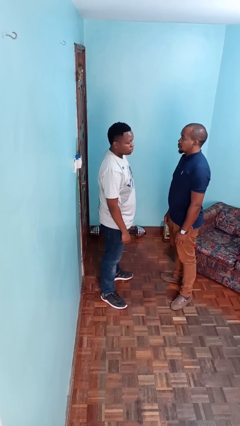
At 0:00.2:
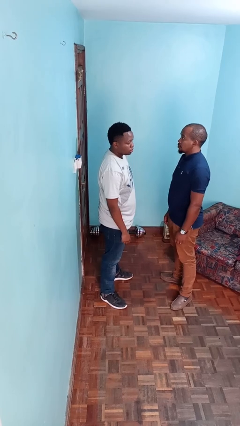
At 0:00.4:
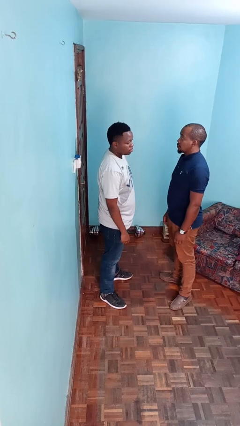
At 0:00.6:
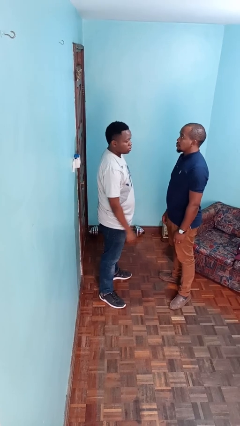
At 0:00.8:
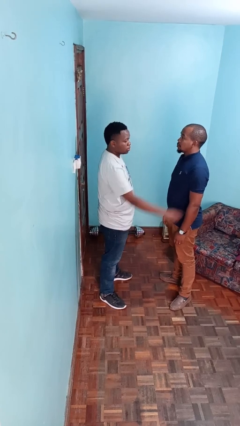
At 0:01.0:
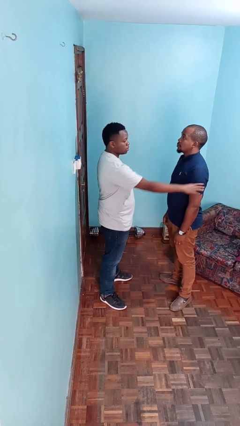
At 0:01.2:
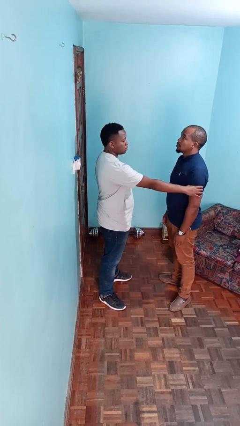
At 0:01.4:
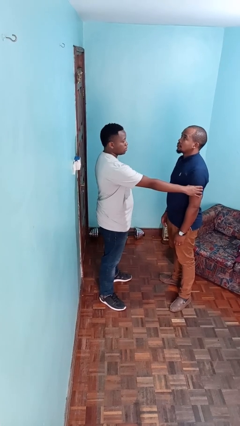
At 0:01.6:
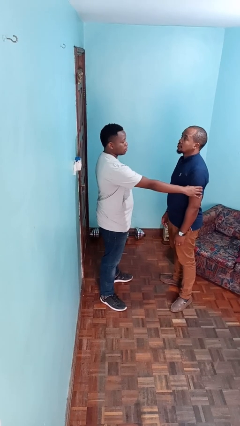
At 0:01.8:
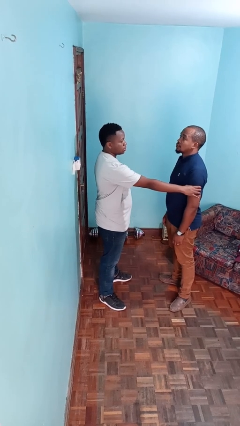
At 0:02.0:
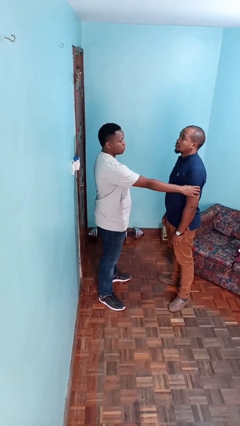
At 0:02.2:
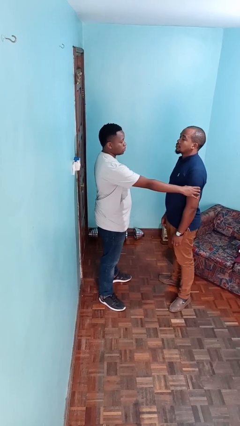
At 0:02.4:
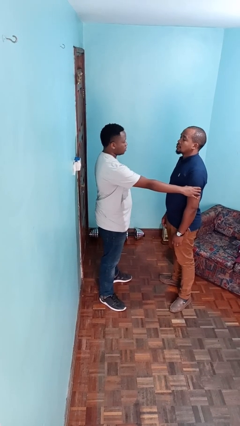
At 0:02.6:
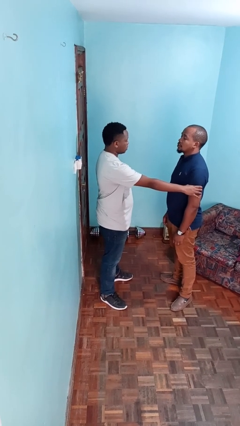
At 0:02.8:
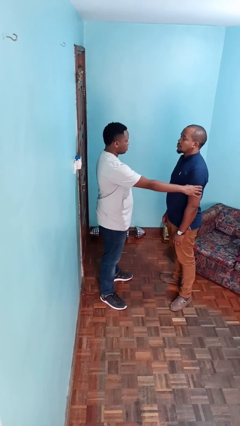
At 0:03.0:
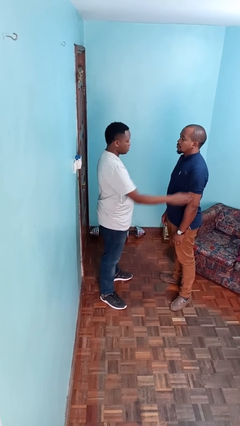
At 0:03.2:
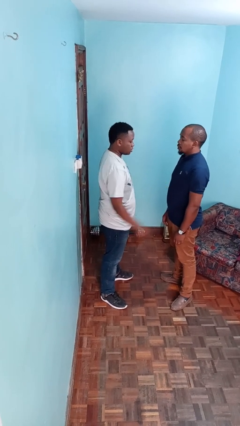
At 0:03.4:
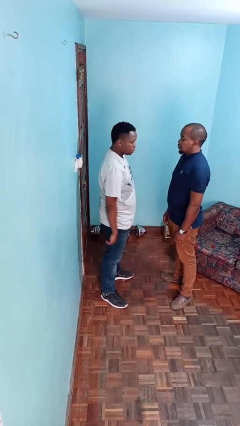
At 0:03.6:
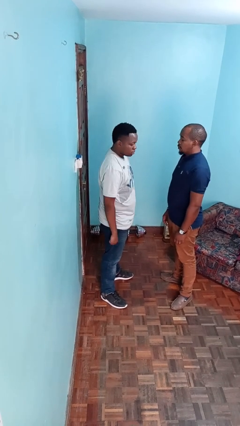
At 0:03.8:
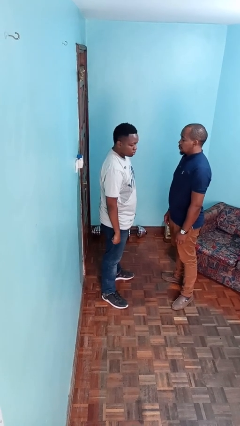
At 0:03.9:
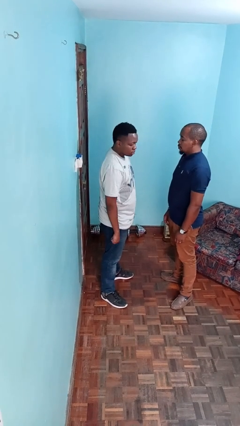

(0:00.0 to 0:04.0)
person grabs person by bicep

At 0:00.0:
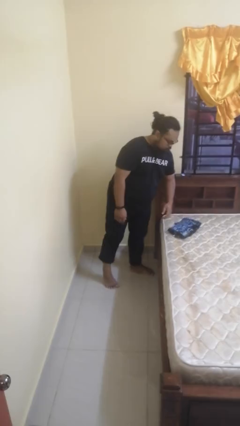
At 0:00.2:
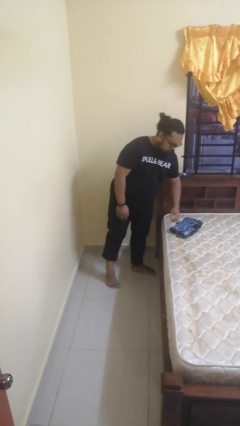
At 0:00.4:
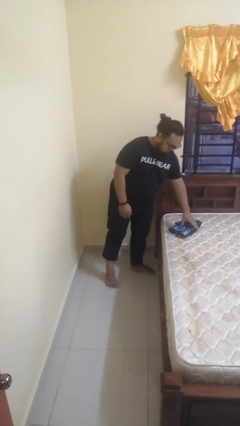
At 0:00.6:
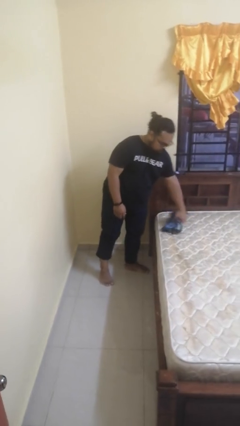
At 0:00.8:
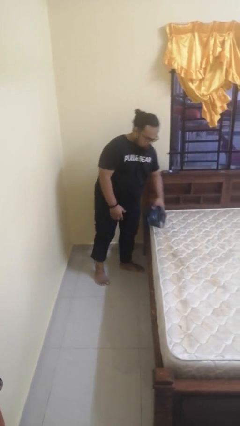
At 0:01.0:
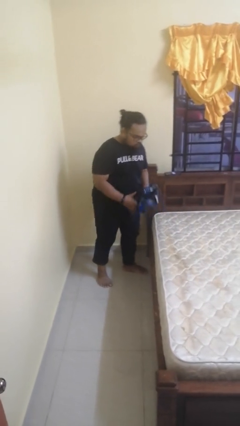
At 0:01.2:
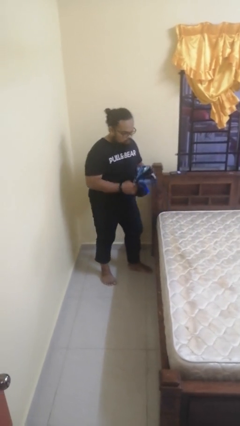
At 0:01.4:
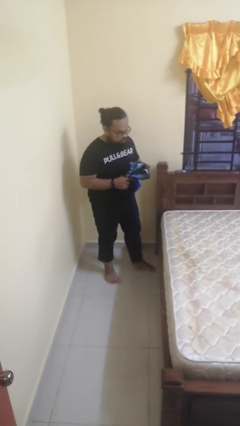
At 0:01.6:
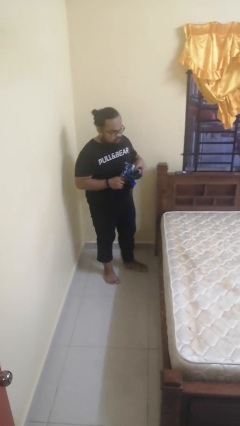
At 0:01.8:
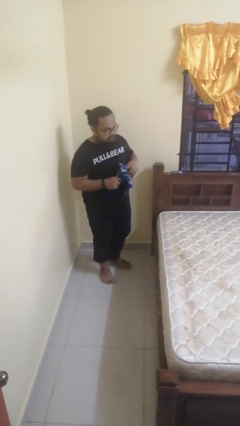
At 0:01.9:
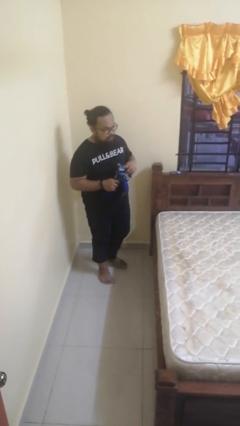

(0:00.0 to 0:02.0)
person picks up object from bed

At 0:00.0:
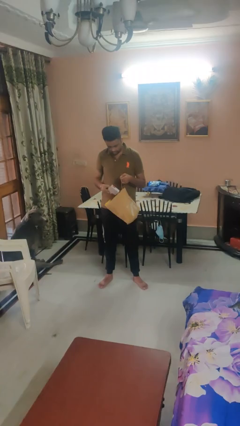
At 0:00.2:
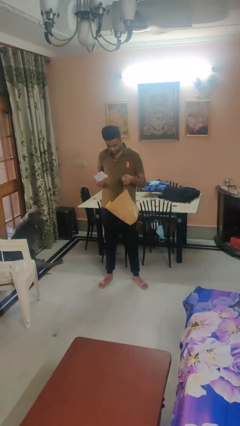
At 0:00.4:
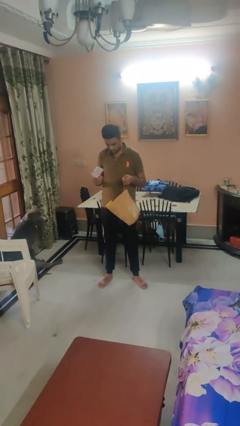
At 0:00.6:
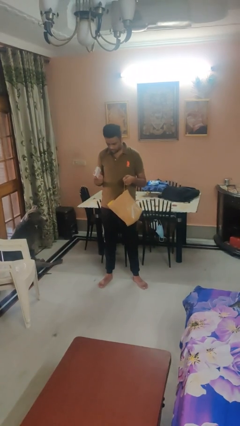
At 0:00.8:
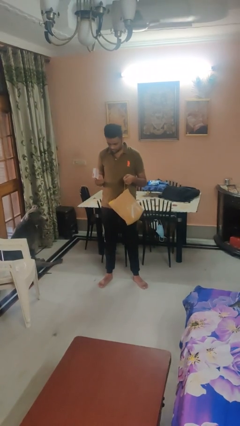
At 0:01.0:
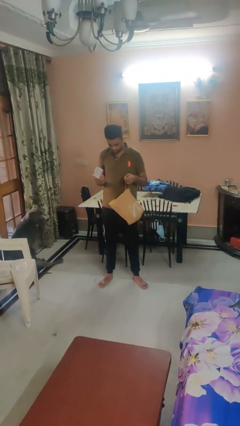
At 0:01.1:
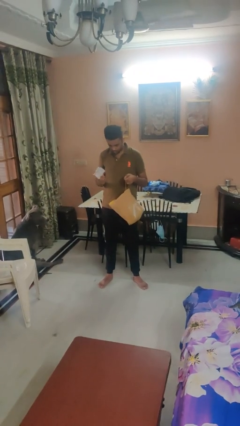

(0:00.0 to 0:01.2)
person takes object from bag

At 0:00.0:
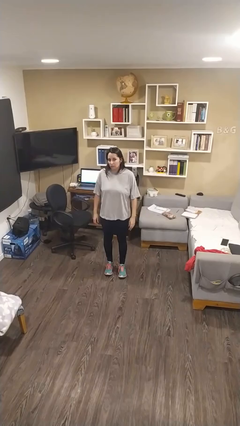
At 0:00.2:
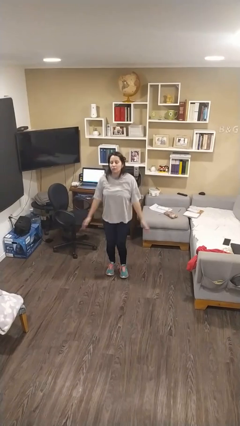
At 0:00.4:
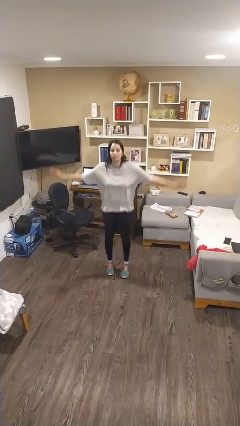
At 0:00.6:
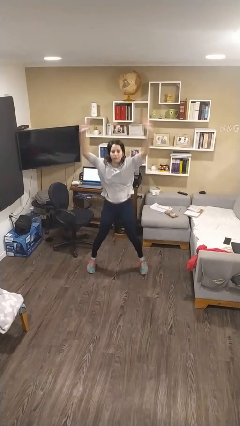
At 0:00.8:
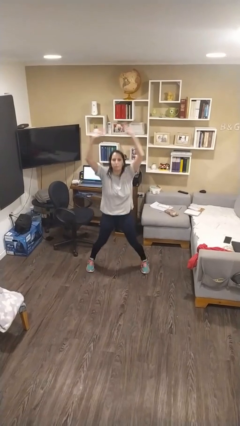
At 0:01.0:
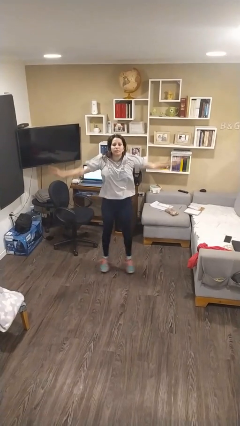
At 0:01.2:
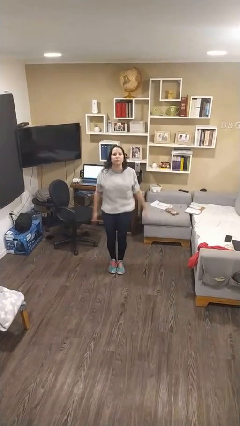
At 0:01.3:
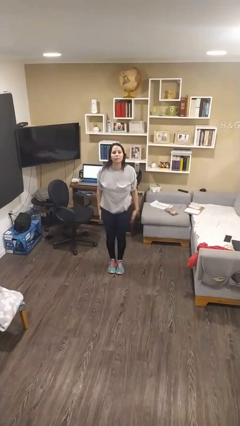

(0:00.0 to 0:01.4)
person exercises with jumping jacks

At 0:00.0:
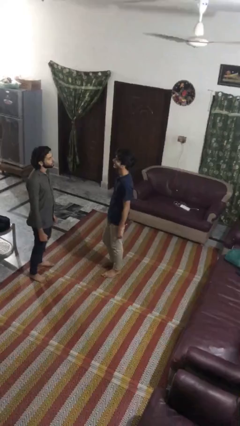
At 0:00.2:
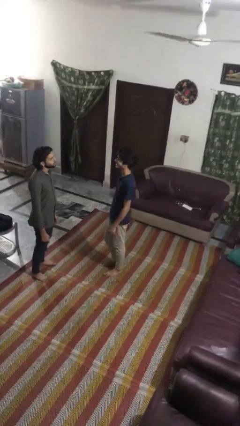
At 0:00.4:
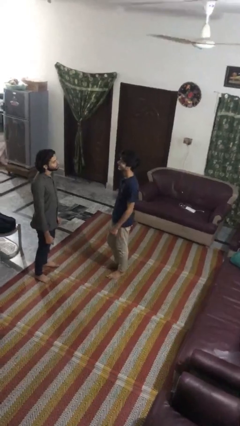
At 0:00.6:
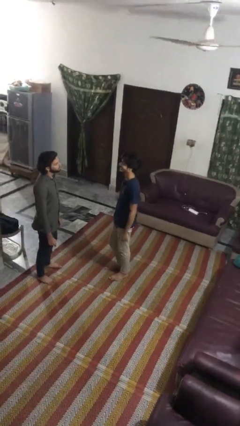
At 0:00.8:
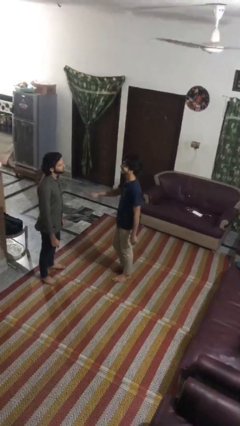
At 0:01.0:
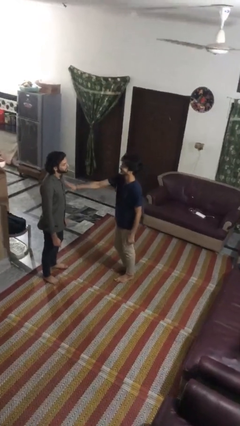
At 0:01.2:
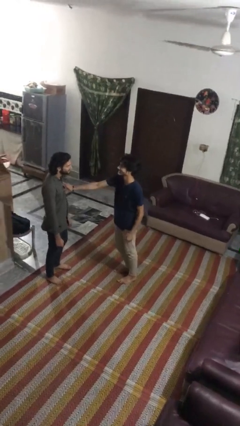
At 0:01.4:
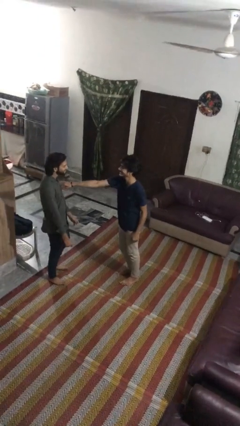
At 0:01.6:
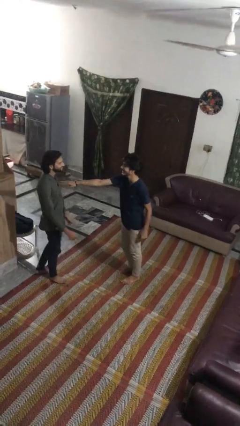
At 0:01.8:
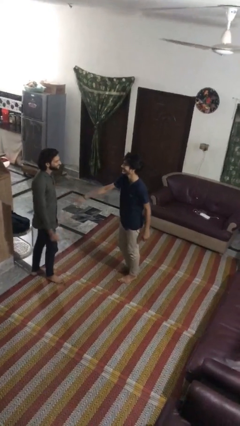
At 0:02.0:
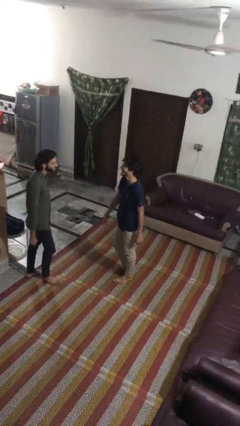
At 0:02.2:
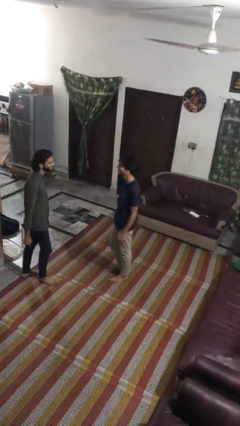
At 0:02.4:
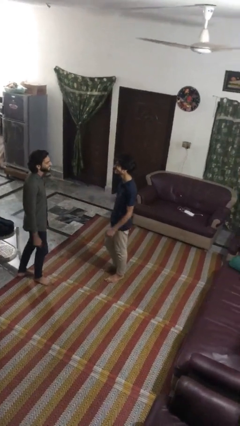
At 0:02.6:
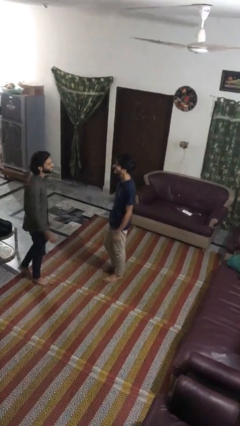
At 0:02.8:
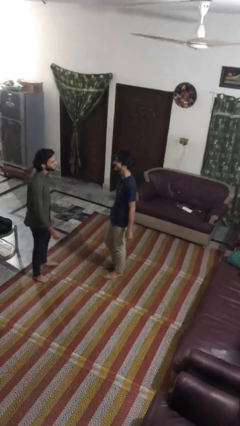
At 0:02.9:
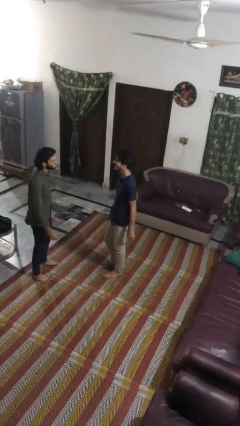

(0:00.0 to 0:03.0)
person shoves person

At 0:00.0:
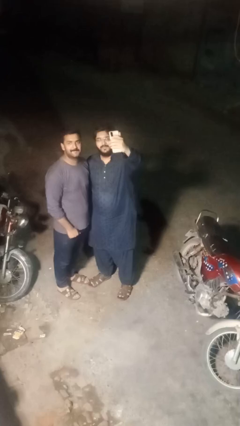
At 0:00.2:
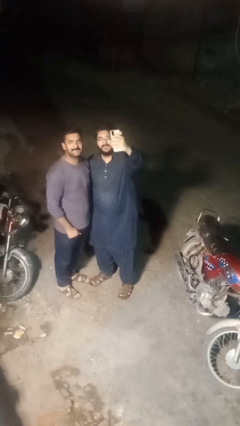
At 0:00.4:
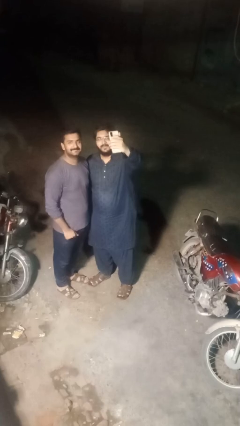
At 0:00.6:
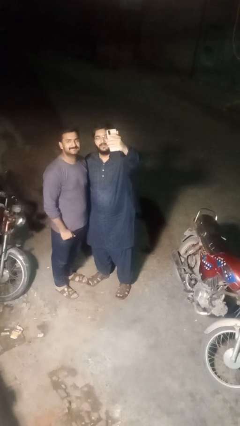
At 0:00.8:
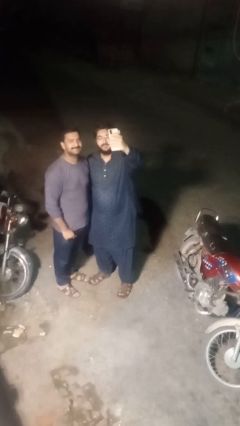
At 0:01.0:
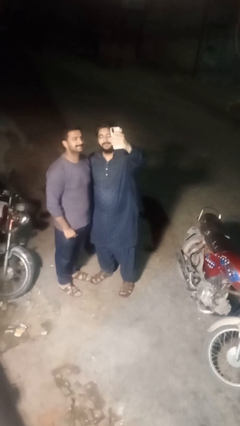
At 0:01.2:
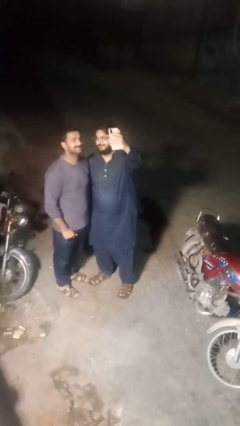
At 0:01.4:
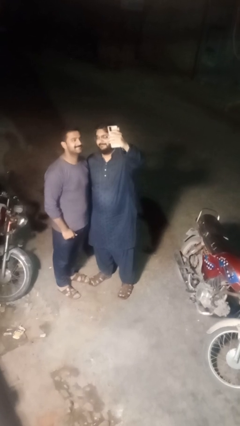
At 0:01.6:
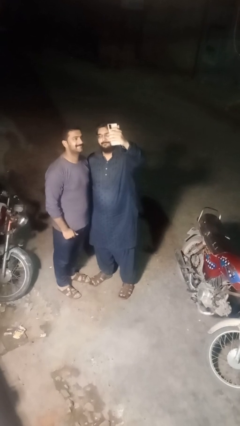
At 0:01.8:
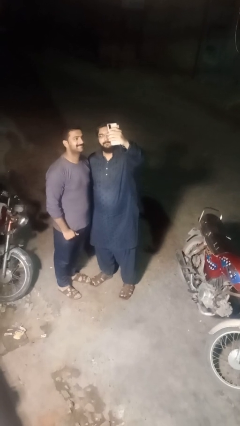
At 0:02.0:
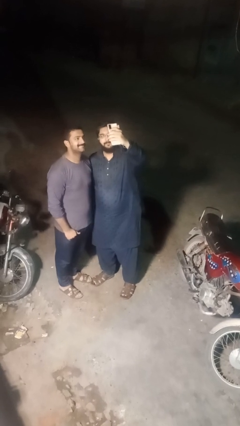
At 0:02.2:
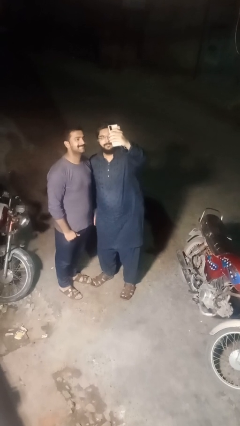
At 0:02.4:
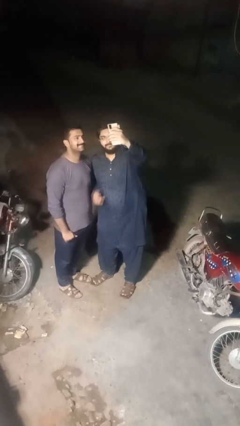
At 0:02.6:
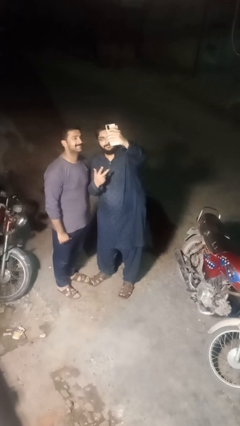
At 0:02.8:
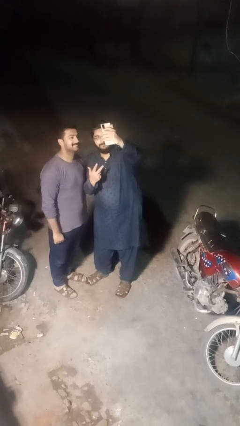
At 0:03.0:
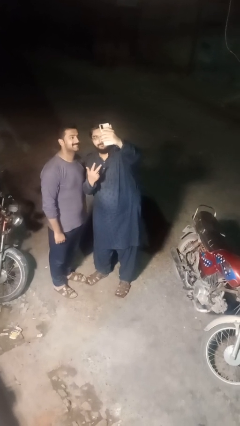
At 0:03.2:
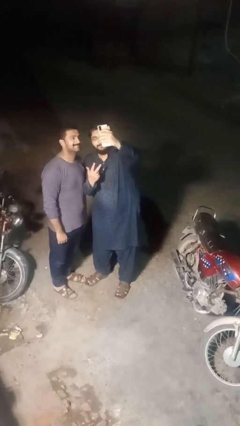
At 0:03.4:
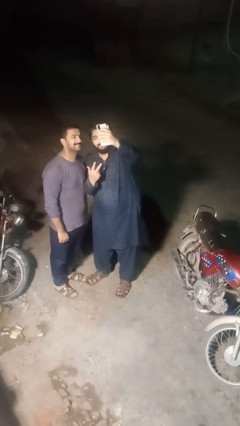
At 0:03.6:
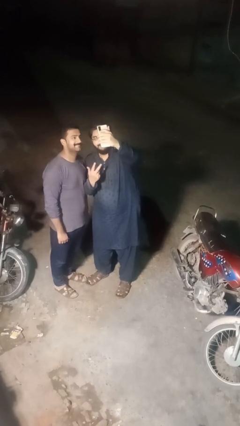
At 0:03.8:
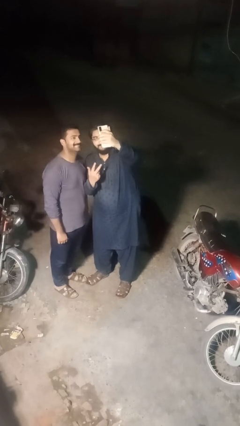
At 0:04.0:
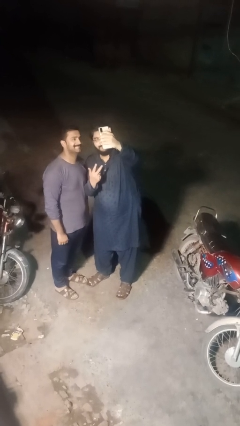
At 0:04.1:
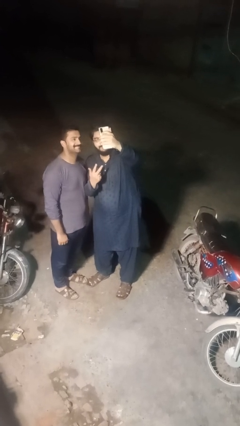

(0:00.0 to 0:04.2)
person takes selfie with person

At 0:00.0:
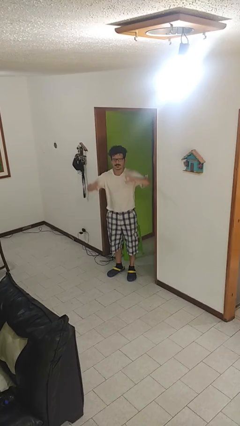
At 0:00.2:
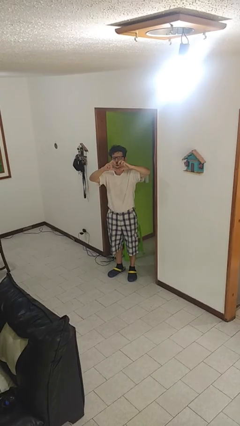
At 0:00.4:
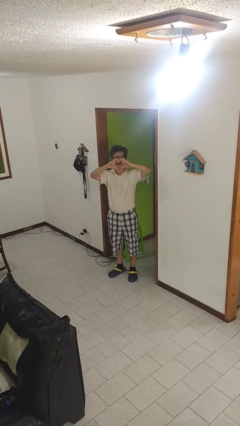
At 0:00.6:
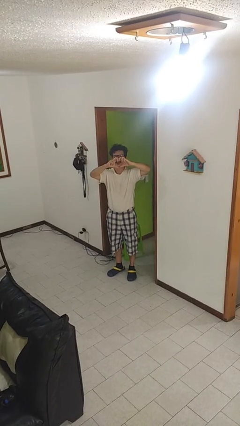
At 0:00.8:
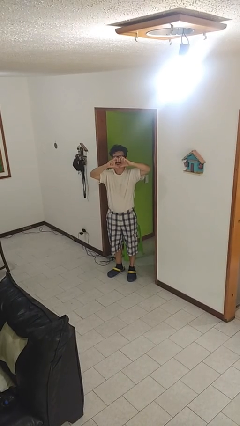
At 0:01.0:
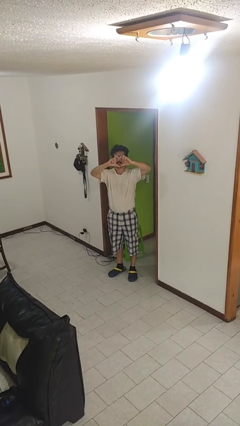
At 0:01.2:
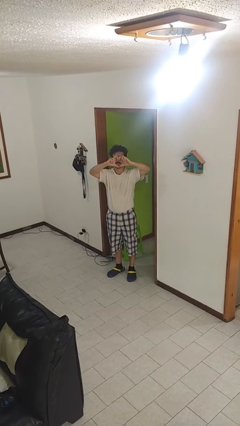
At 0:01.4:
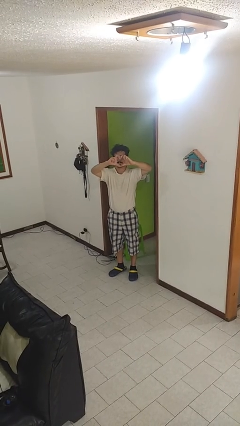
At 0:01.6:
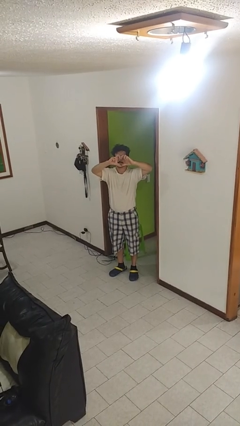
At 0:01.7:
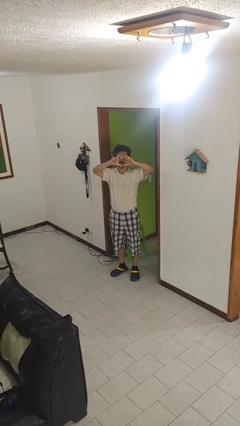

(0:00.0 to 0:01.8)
person gestures heart
